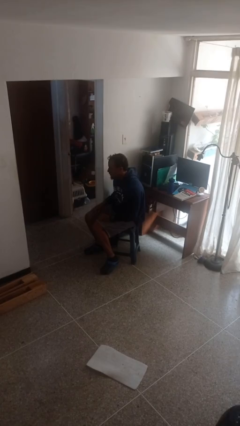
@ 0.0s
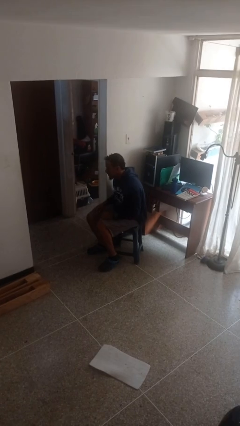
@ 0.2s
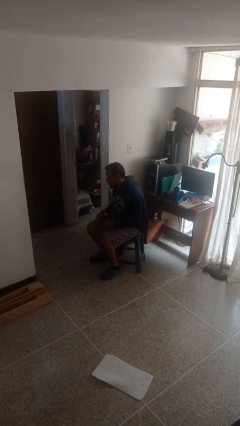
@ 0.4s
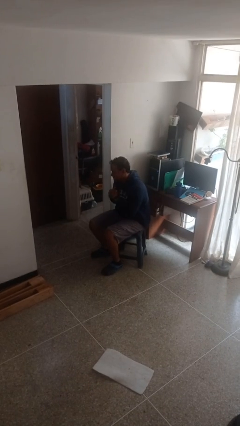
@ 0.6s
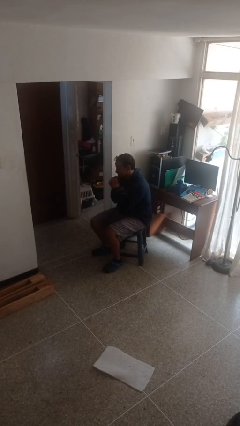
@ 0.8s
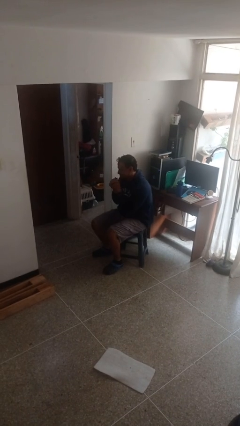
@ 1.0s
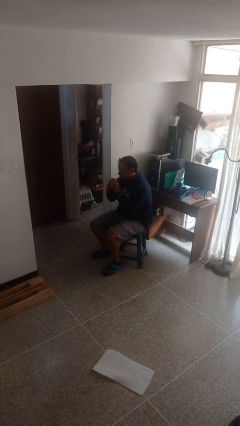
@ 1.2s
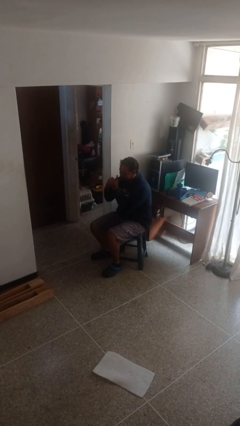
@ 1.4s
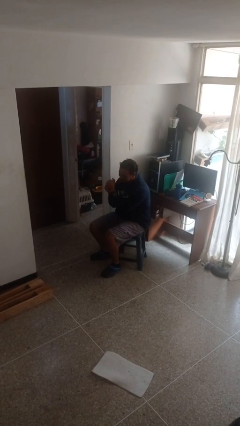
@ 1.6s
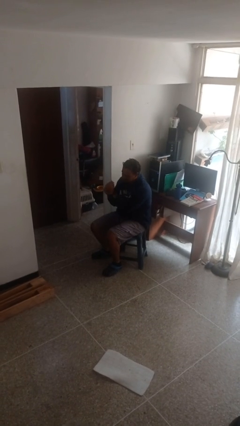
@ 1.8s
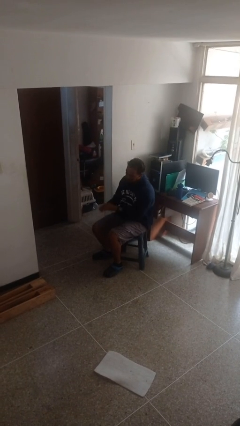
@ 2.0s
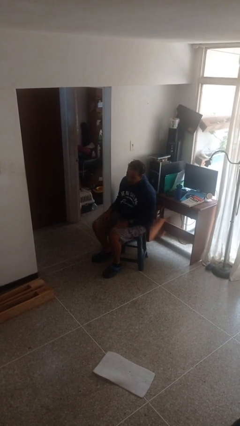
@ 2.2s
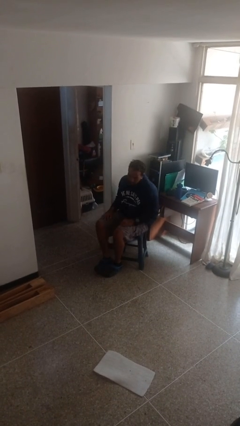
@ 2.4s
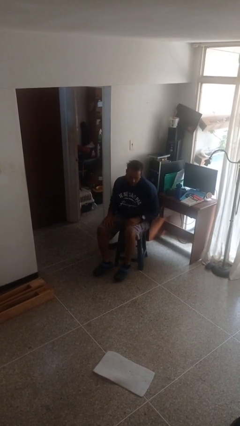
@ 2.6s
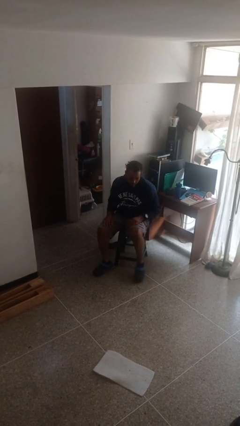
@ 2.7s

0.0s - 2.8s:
person cracks knuckles

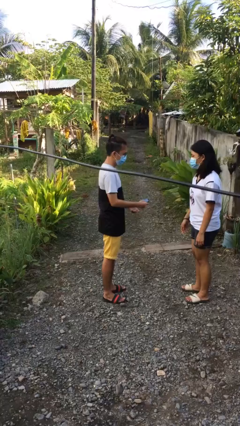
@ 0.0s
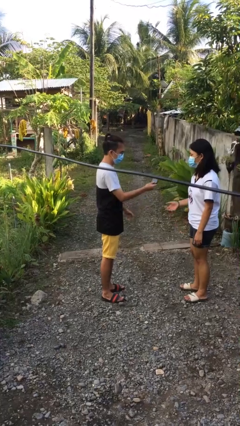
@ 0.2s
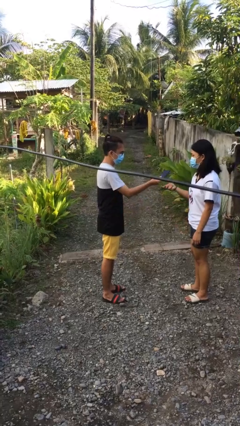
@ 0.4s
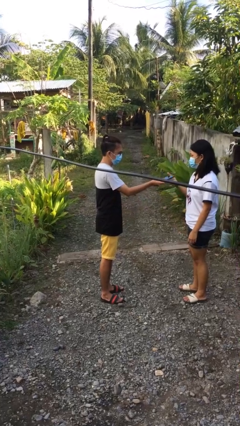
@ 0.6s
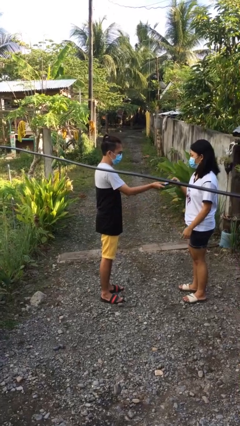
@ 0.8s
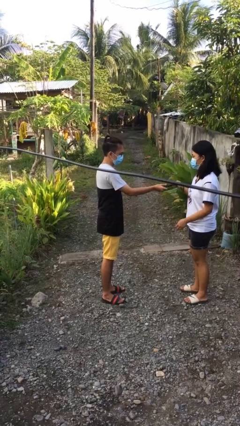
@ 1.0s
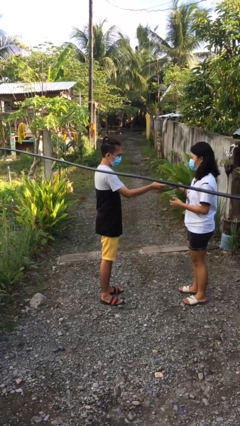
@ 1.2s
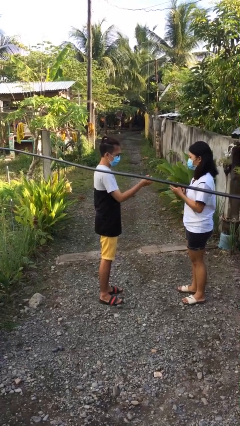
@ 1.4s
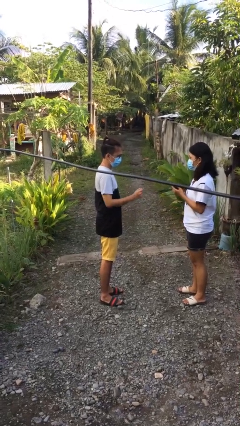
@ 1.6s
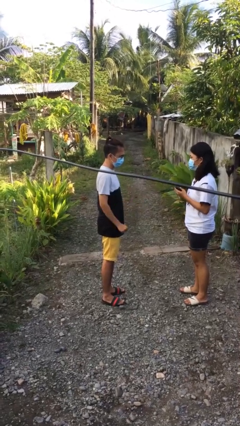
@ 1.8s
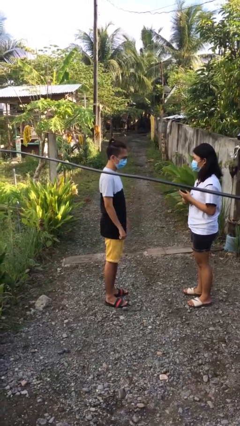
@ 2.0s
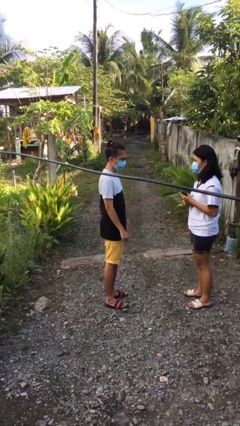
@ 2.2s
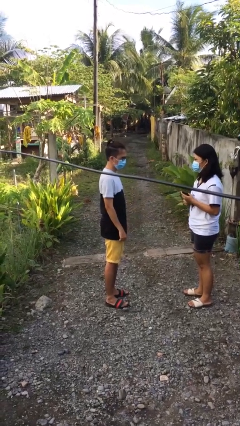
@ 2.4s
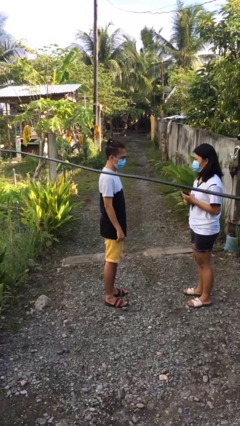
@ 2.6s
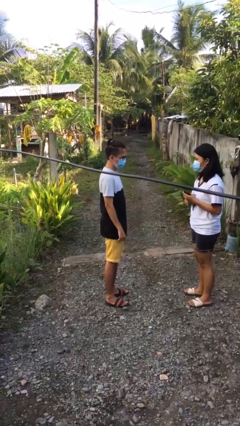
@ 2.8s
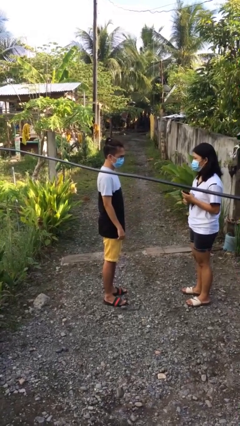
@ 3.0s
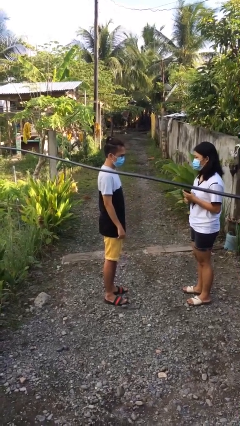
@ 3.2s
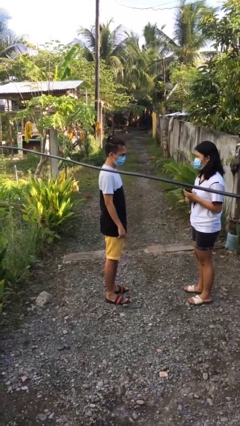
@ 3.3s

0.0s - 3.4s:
person transfers object to person

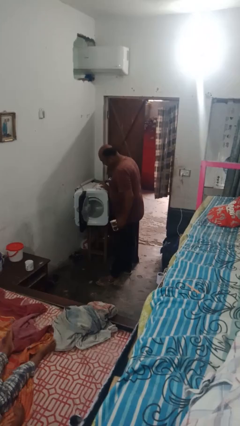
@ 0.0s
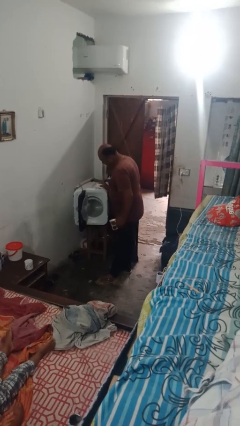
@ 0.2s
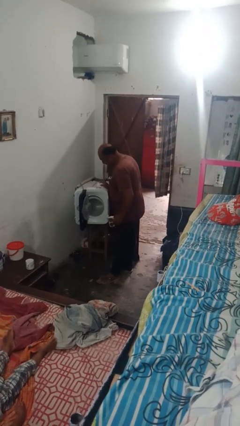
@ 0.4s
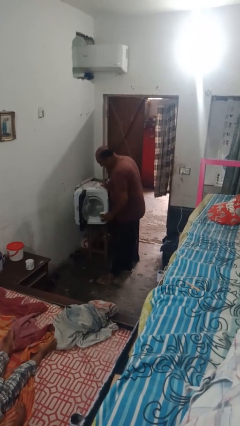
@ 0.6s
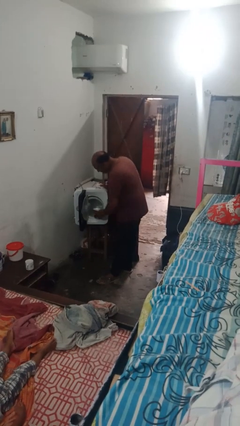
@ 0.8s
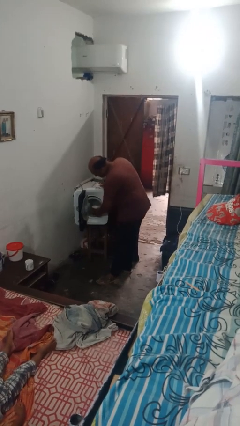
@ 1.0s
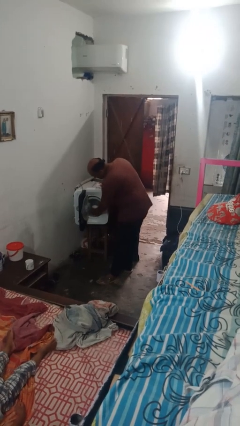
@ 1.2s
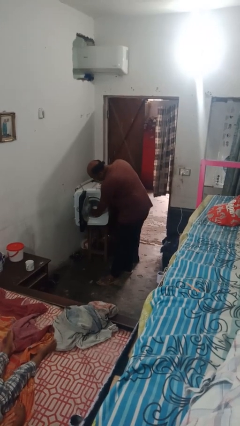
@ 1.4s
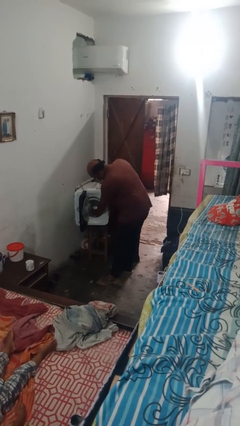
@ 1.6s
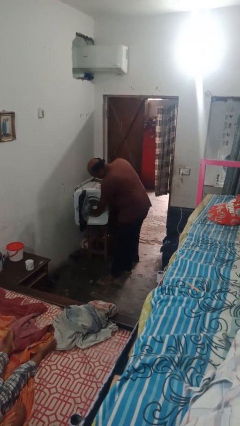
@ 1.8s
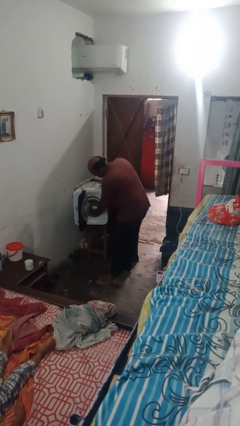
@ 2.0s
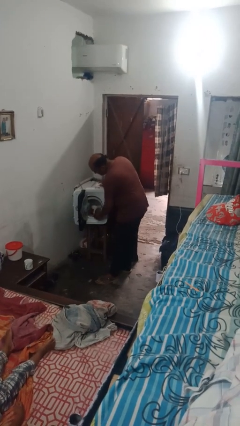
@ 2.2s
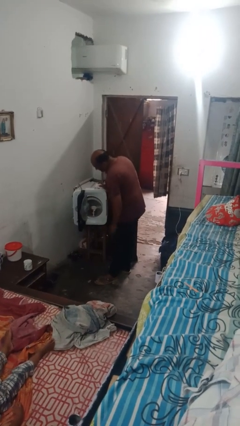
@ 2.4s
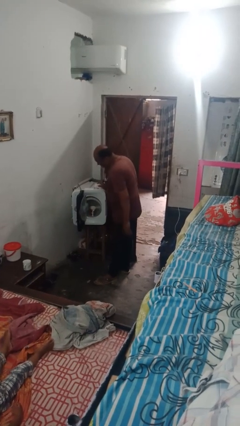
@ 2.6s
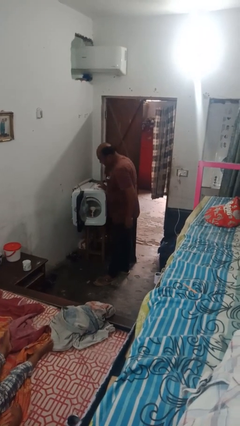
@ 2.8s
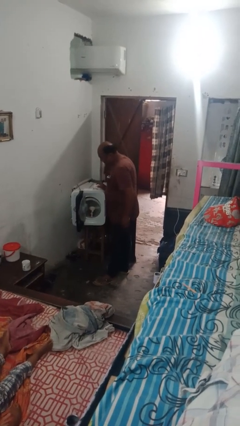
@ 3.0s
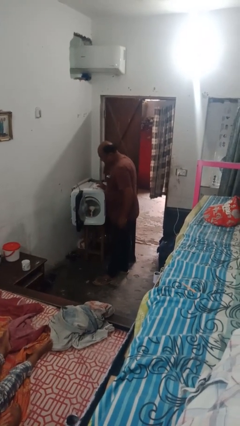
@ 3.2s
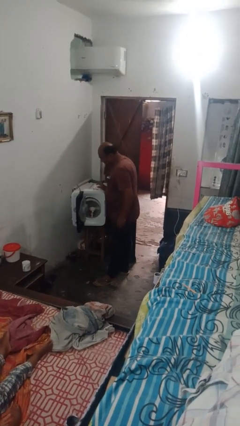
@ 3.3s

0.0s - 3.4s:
person loads dishwasher

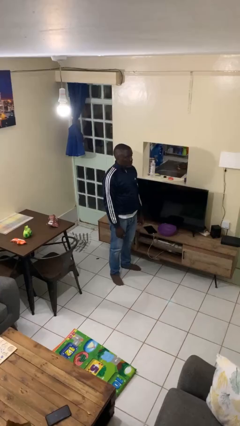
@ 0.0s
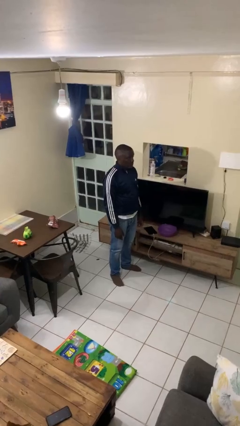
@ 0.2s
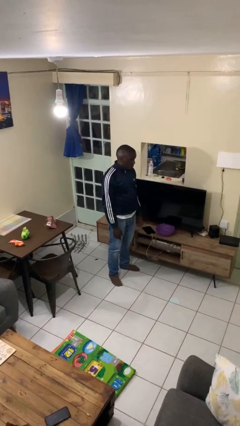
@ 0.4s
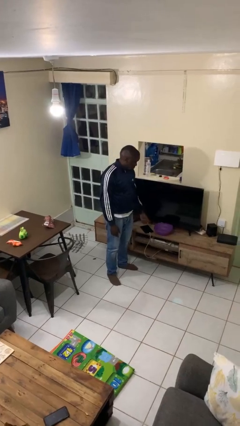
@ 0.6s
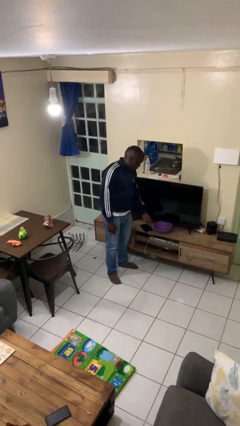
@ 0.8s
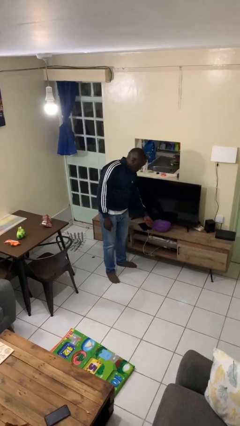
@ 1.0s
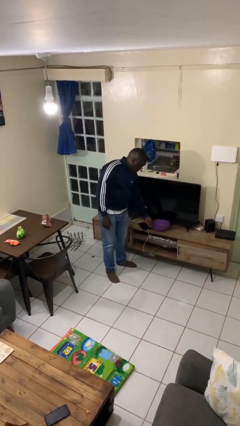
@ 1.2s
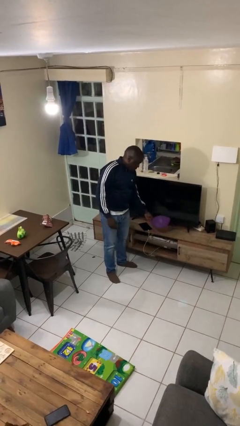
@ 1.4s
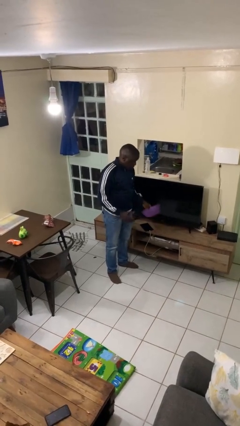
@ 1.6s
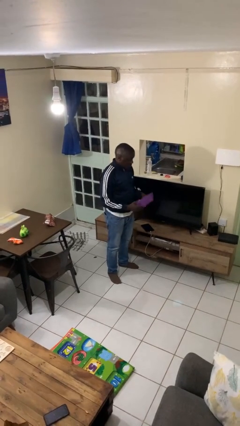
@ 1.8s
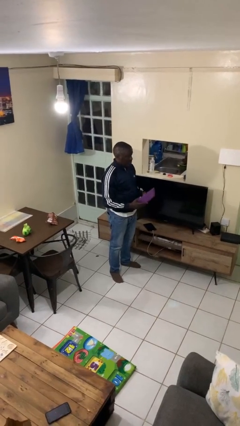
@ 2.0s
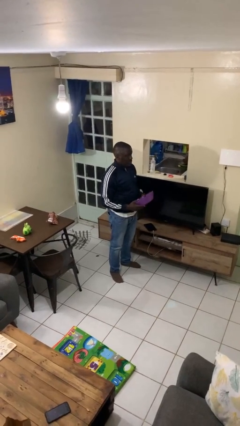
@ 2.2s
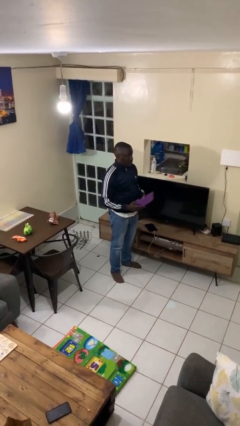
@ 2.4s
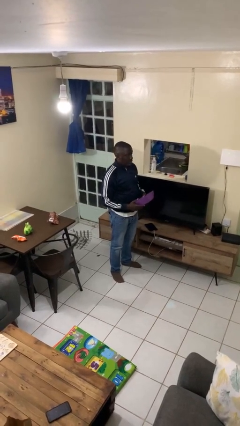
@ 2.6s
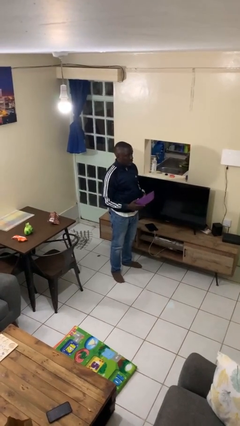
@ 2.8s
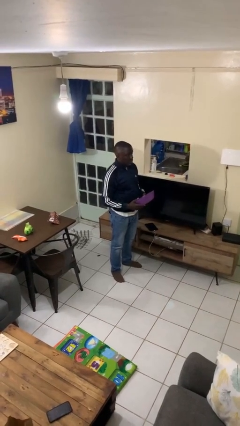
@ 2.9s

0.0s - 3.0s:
person picks up object from countertop

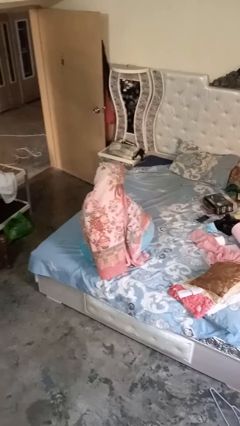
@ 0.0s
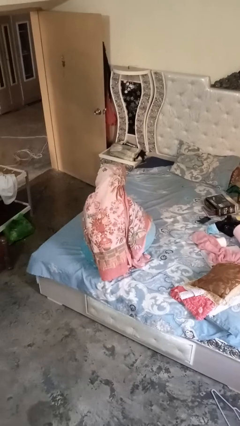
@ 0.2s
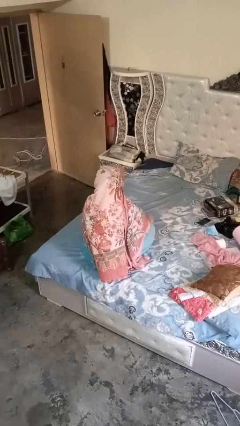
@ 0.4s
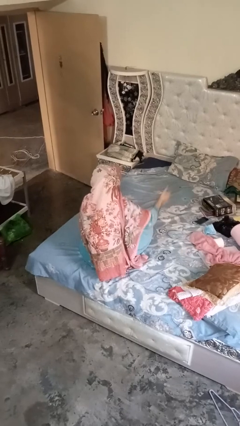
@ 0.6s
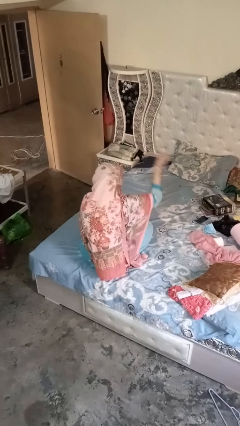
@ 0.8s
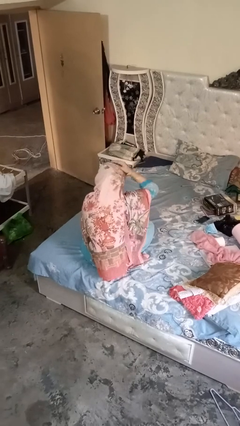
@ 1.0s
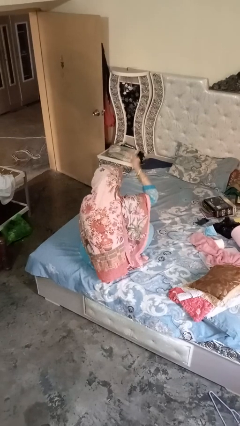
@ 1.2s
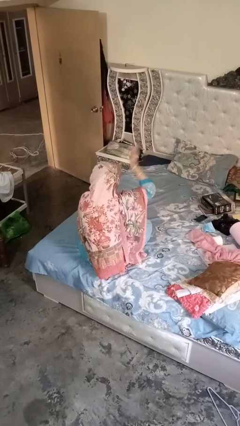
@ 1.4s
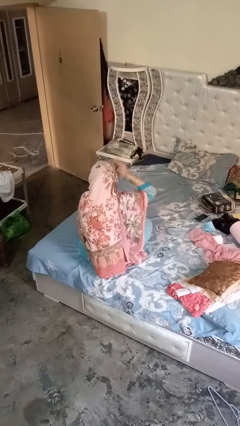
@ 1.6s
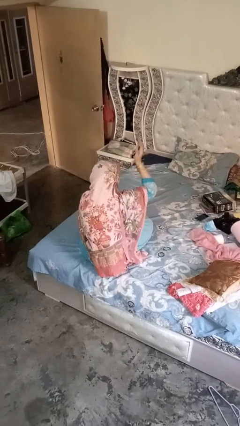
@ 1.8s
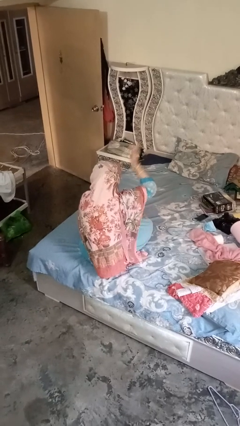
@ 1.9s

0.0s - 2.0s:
person pats head

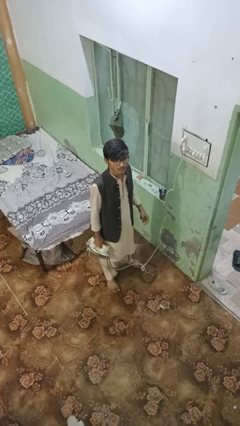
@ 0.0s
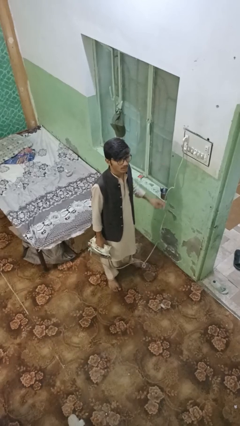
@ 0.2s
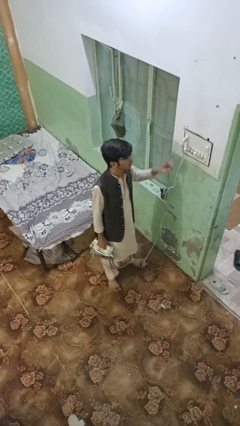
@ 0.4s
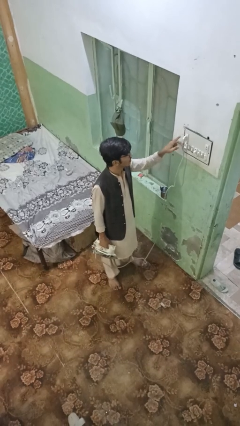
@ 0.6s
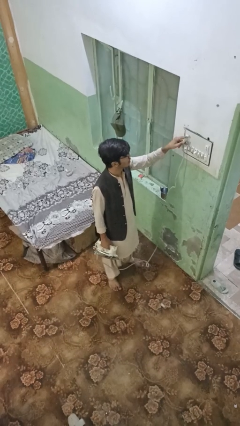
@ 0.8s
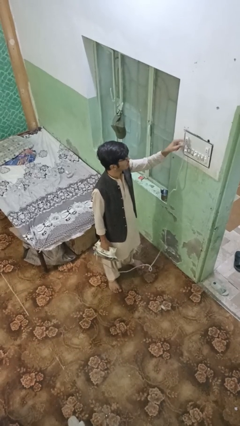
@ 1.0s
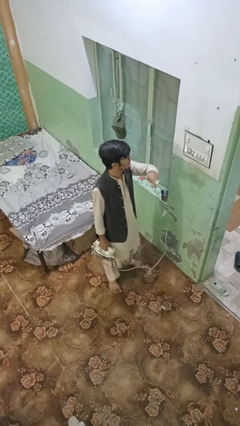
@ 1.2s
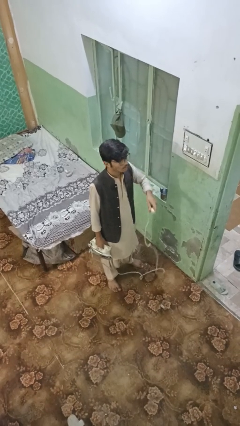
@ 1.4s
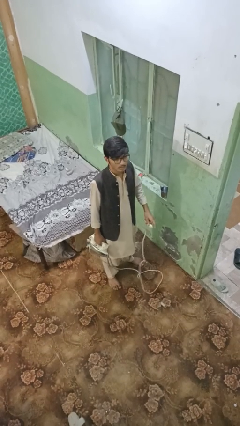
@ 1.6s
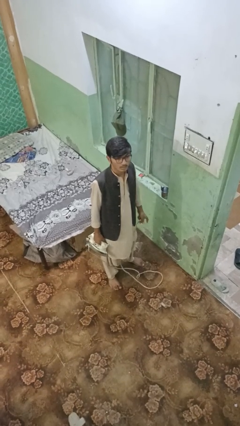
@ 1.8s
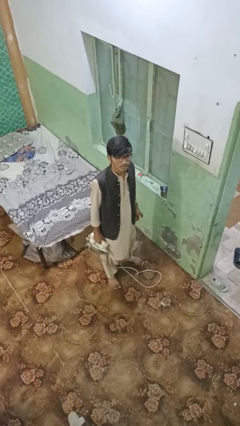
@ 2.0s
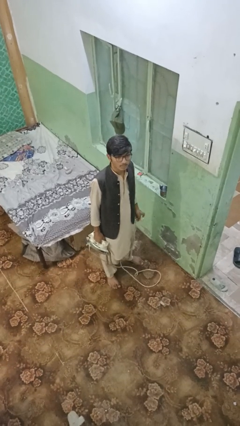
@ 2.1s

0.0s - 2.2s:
person unplugs from electrical socket

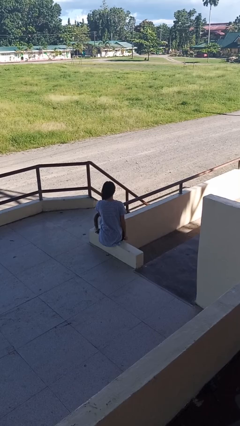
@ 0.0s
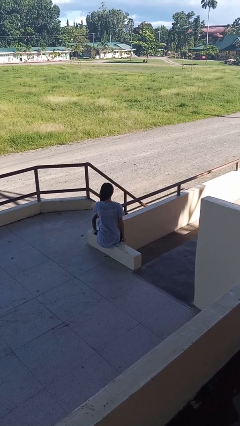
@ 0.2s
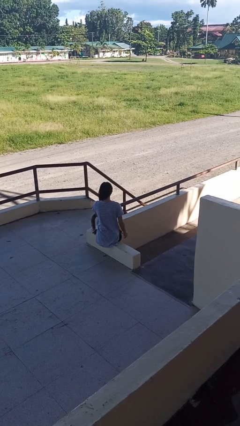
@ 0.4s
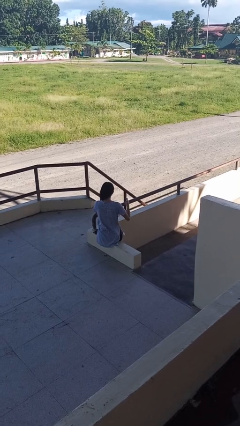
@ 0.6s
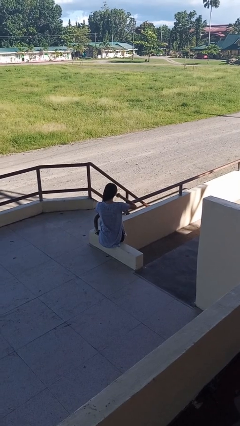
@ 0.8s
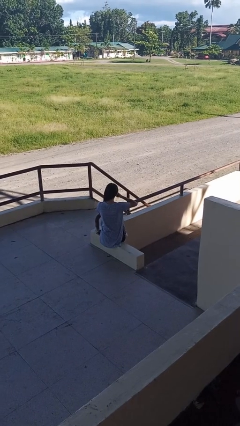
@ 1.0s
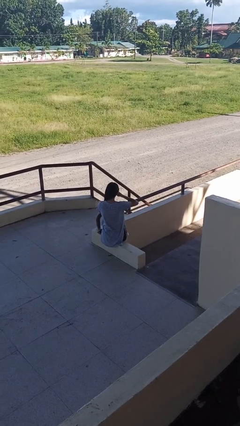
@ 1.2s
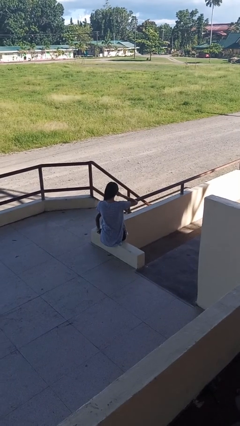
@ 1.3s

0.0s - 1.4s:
person gestures call me
